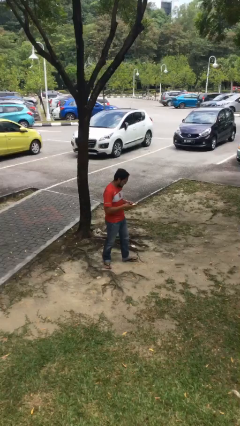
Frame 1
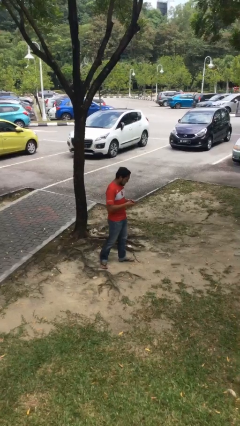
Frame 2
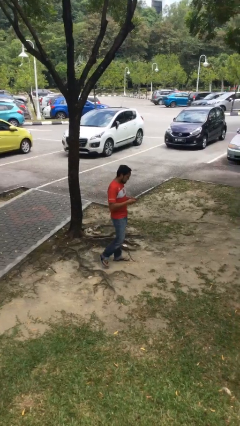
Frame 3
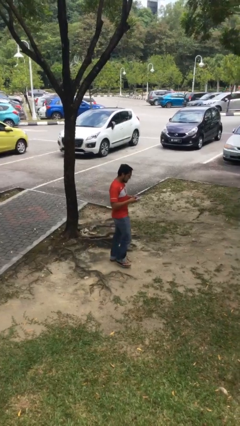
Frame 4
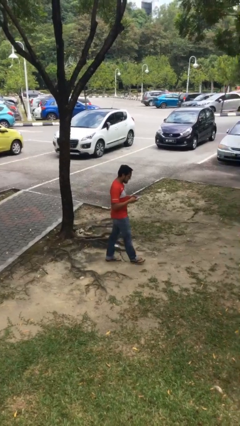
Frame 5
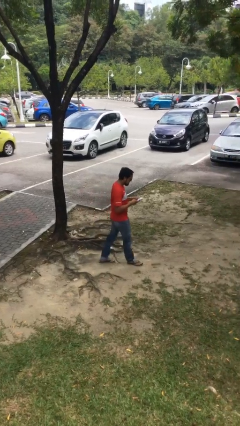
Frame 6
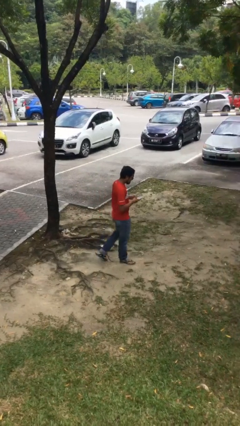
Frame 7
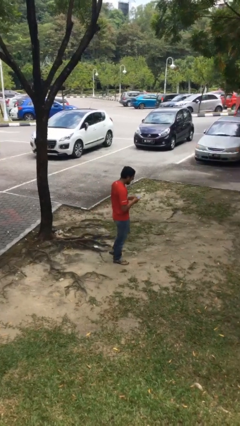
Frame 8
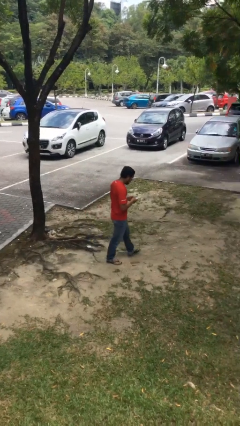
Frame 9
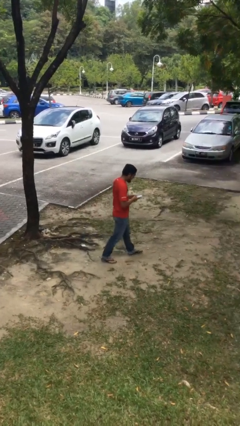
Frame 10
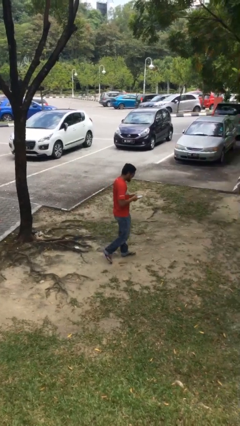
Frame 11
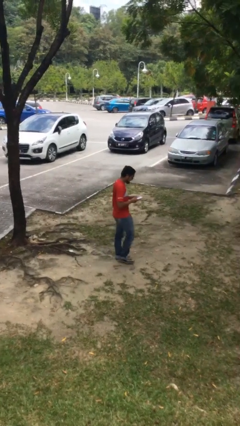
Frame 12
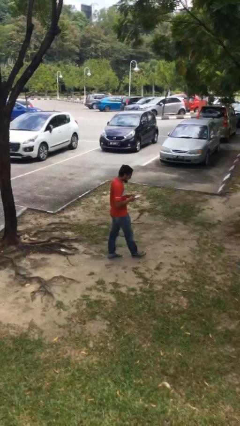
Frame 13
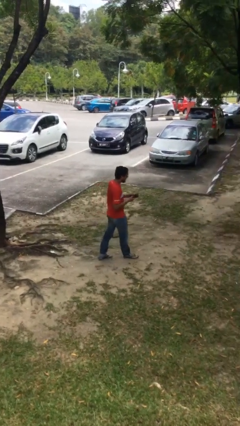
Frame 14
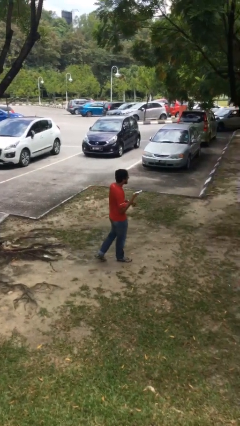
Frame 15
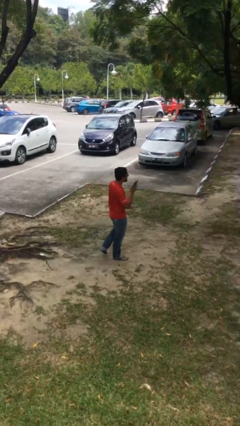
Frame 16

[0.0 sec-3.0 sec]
person texts on phone

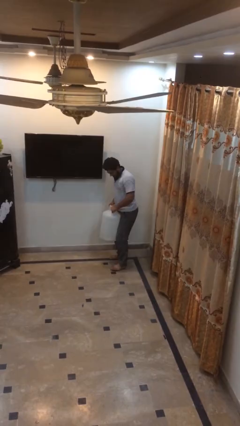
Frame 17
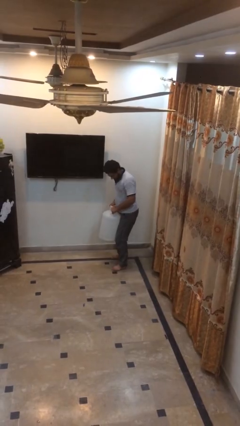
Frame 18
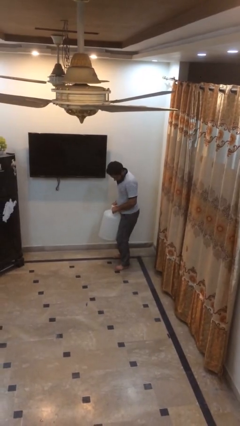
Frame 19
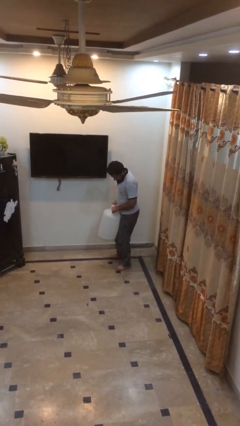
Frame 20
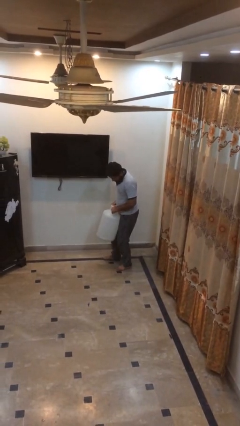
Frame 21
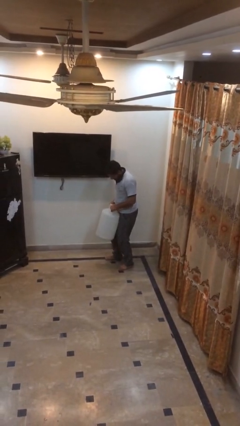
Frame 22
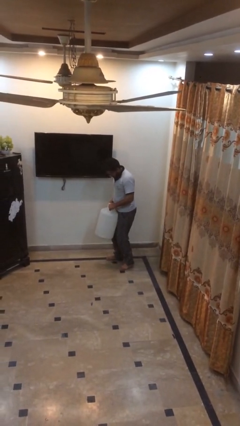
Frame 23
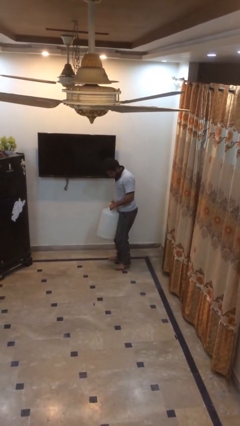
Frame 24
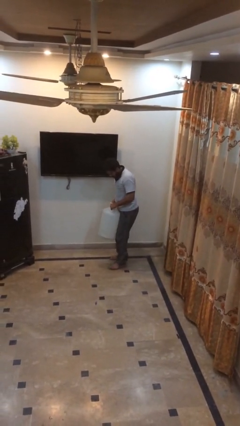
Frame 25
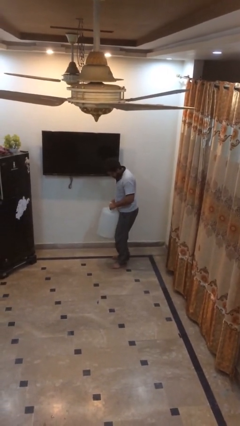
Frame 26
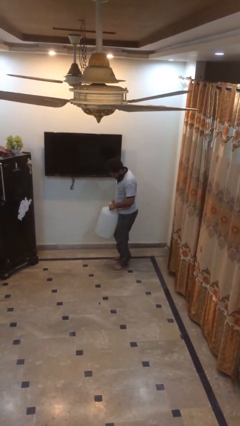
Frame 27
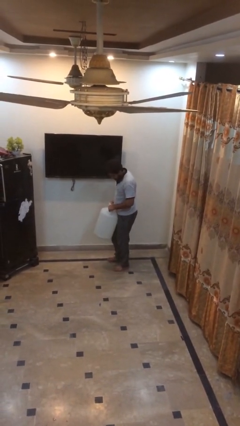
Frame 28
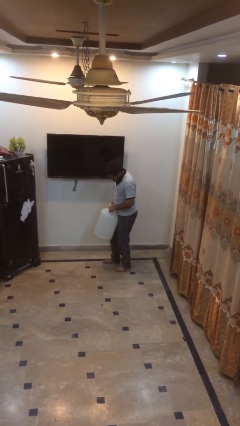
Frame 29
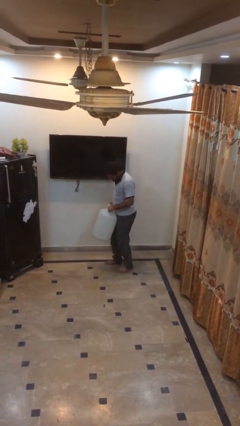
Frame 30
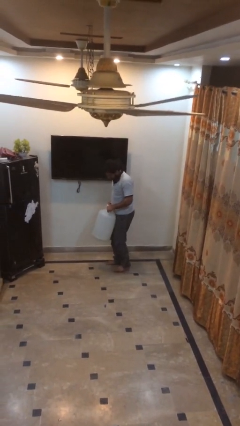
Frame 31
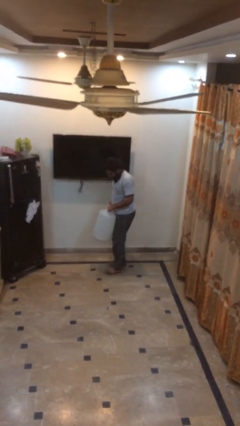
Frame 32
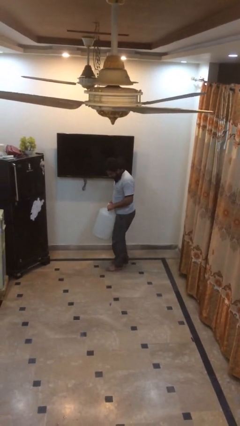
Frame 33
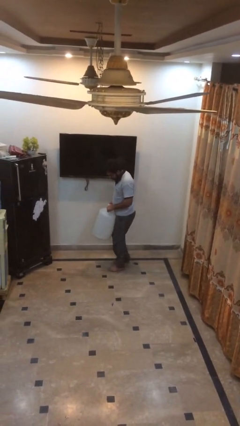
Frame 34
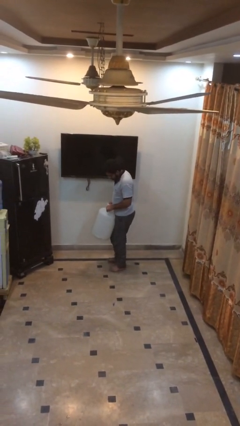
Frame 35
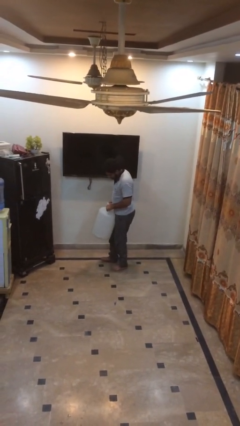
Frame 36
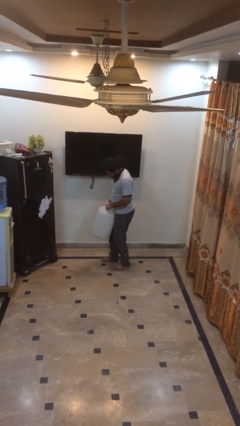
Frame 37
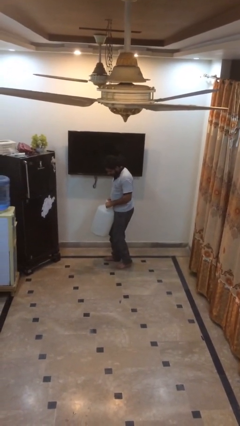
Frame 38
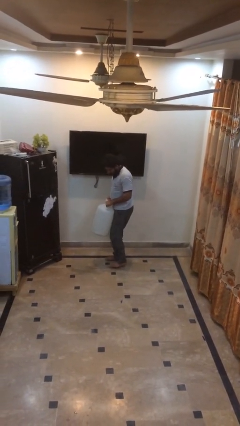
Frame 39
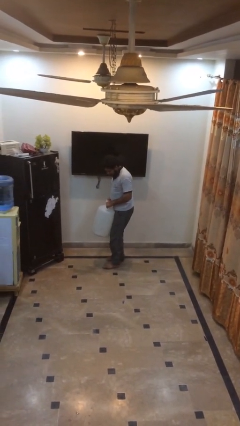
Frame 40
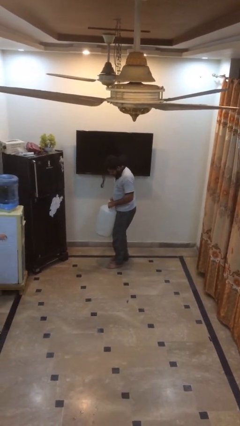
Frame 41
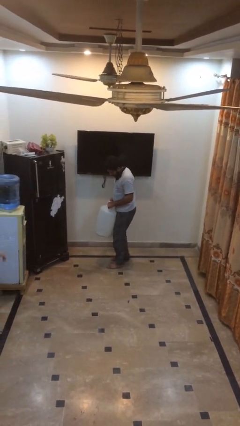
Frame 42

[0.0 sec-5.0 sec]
person carries heavy object

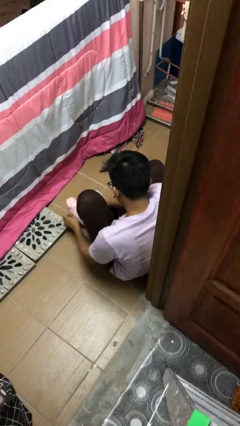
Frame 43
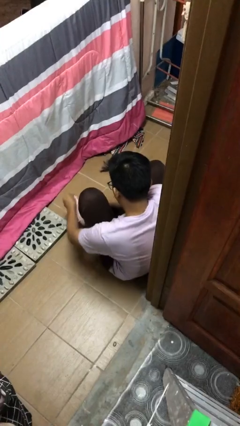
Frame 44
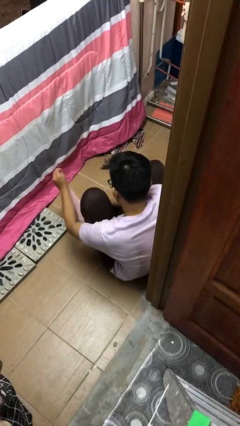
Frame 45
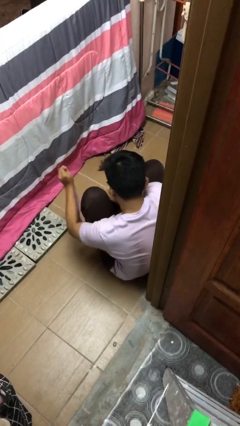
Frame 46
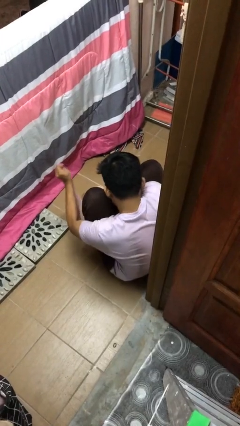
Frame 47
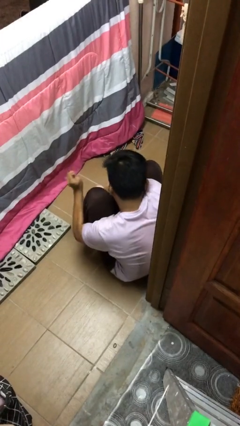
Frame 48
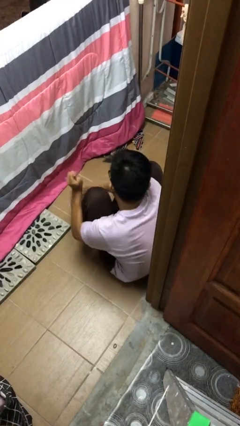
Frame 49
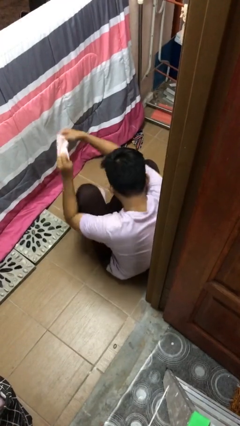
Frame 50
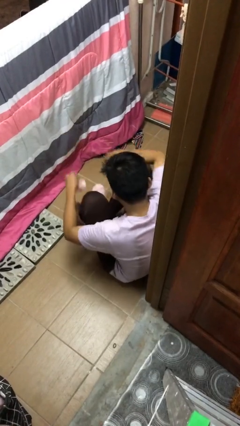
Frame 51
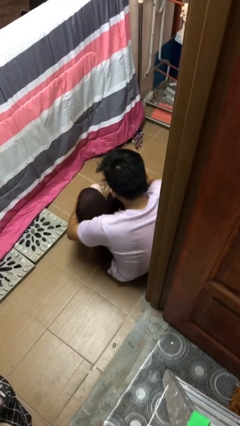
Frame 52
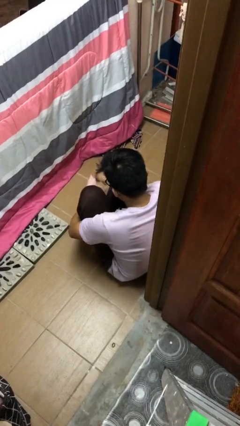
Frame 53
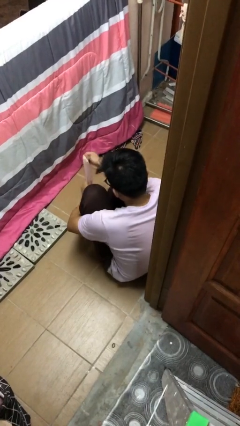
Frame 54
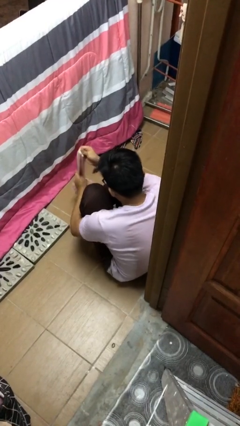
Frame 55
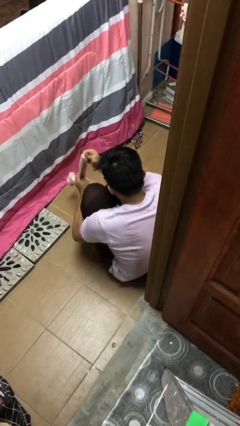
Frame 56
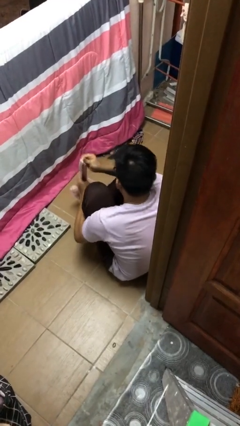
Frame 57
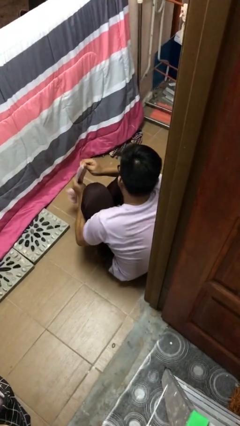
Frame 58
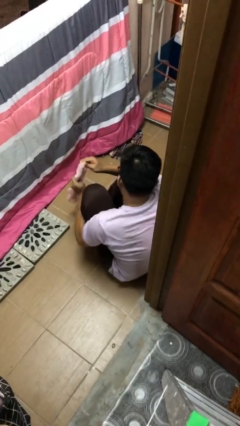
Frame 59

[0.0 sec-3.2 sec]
person takes off socks

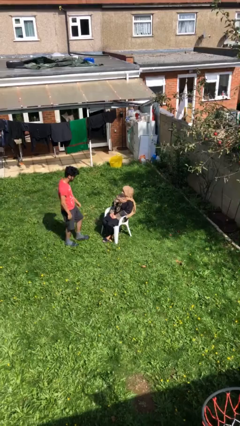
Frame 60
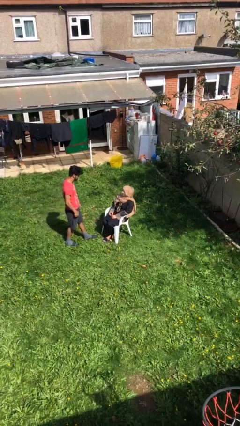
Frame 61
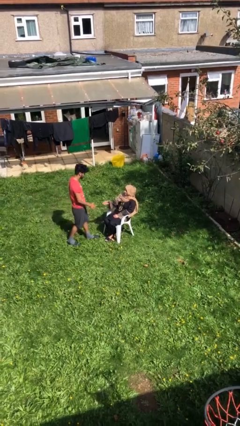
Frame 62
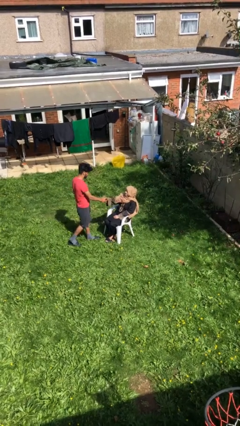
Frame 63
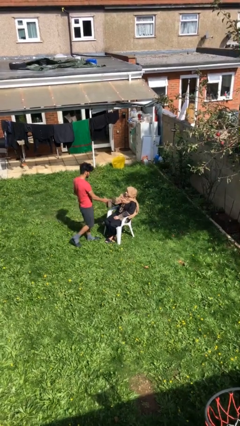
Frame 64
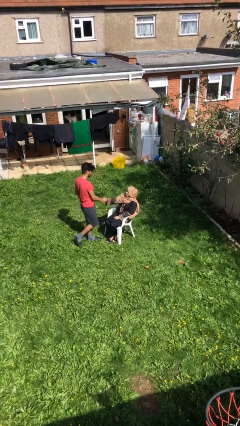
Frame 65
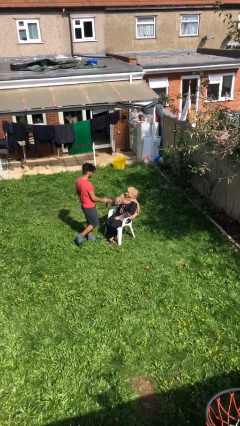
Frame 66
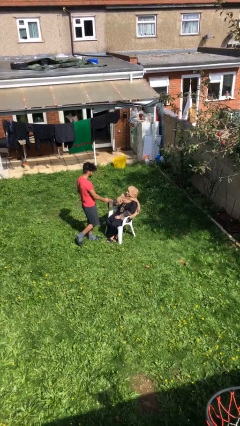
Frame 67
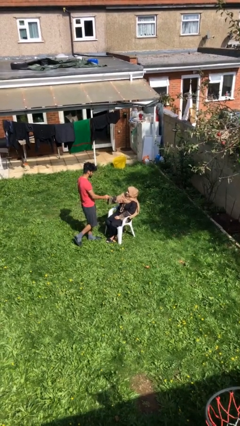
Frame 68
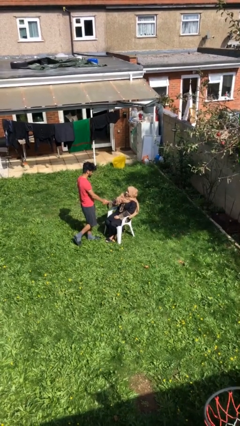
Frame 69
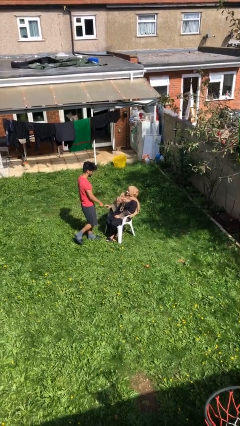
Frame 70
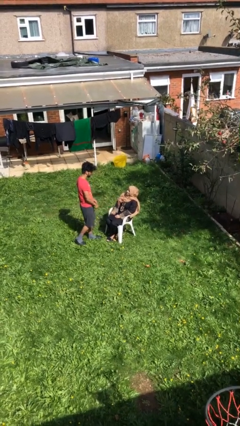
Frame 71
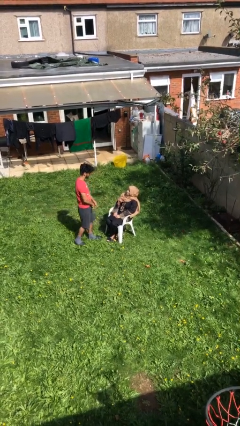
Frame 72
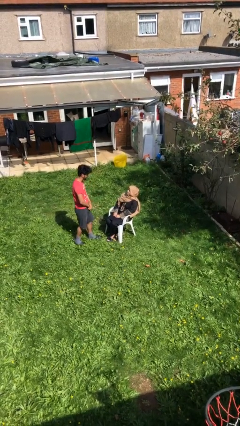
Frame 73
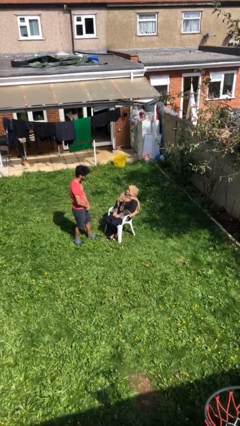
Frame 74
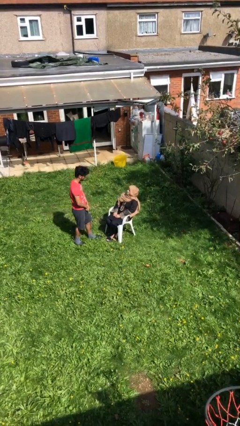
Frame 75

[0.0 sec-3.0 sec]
person shakes hand

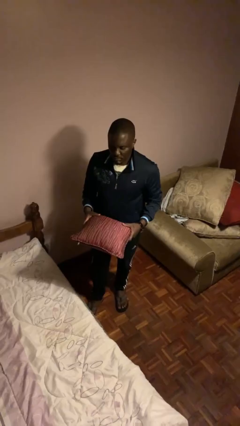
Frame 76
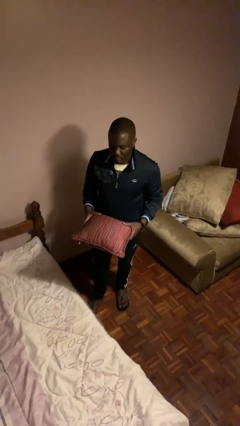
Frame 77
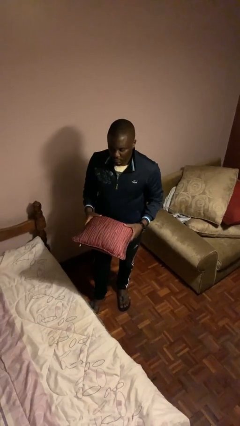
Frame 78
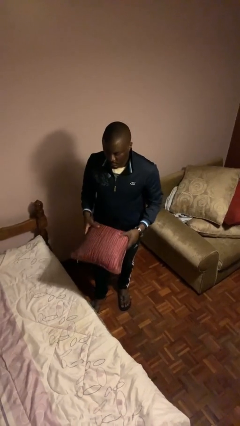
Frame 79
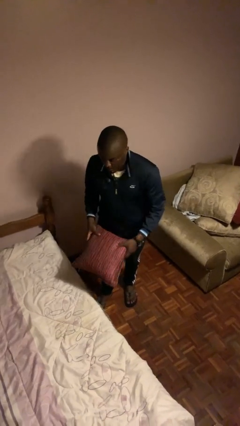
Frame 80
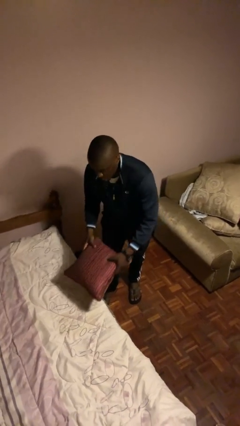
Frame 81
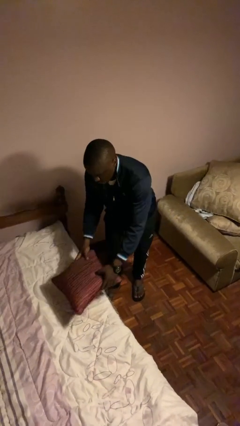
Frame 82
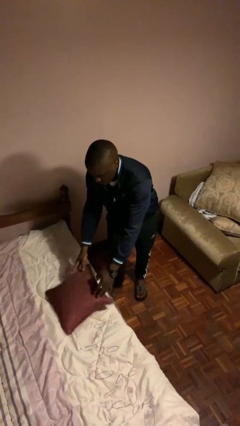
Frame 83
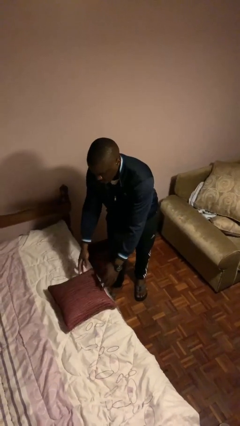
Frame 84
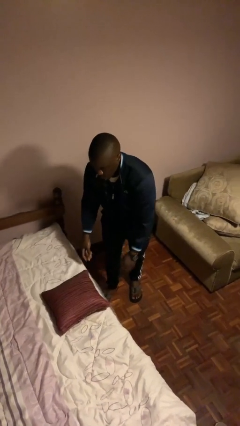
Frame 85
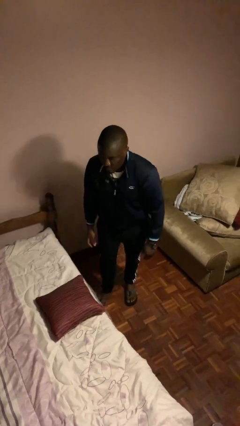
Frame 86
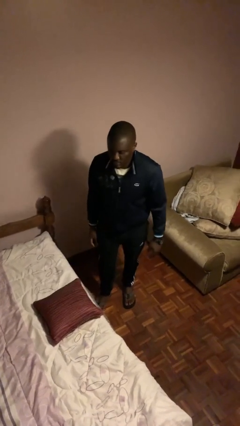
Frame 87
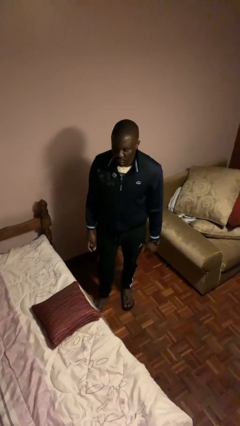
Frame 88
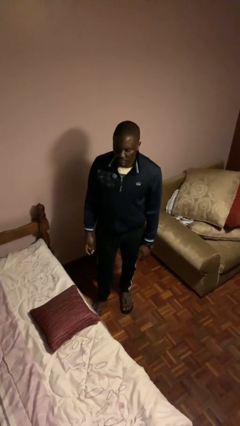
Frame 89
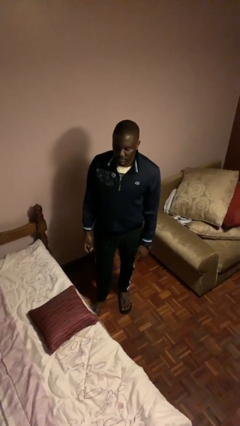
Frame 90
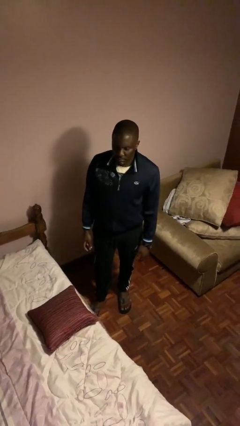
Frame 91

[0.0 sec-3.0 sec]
person puts down object on bed

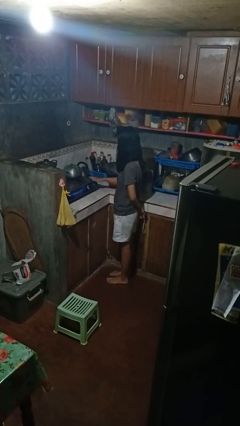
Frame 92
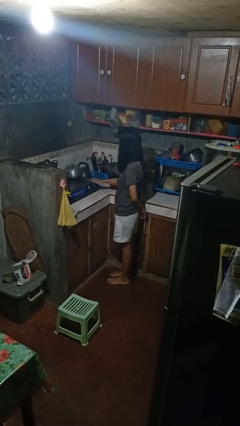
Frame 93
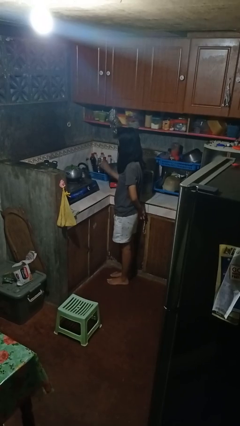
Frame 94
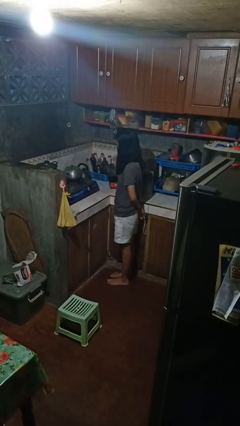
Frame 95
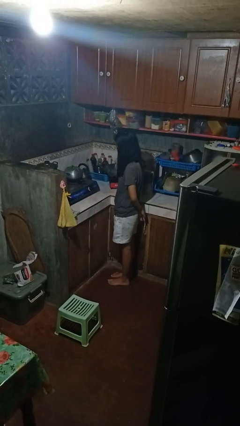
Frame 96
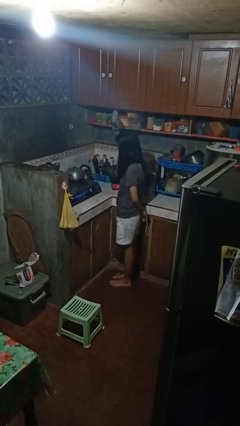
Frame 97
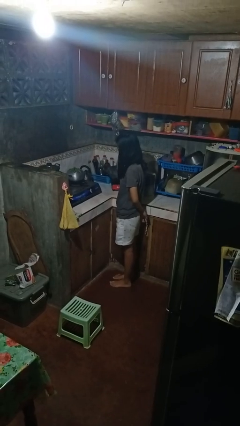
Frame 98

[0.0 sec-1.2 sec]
person burns hand
